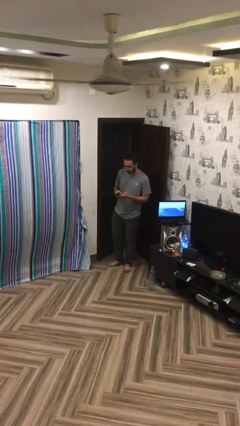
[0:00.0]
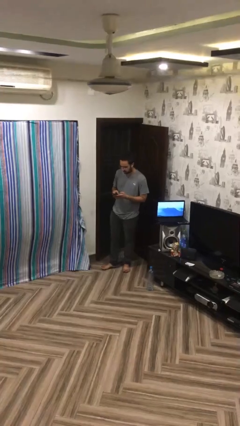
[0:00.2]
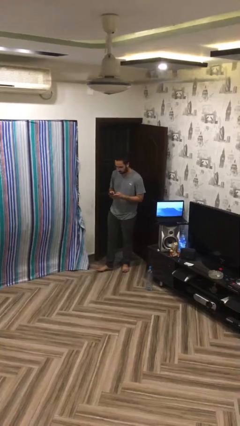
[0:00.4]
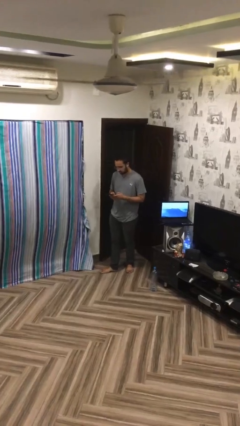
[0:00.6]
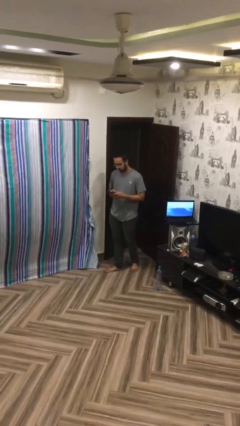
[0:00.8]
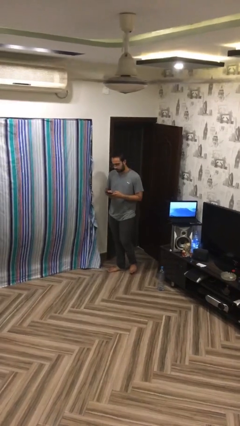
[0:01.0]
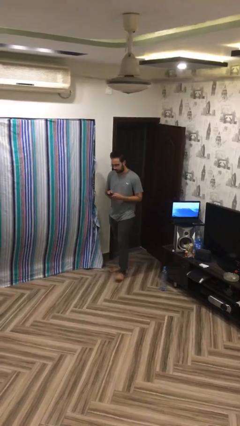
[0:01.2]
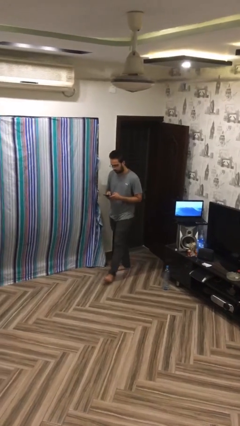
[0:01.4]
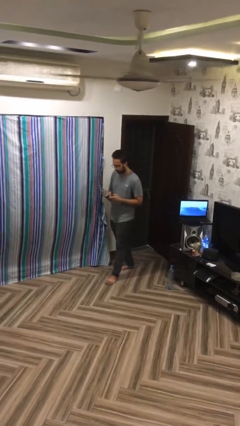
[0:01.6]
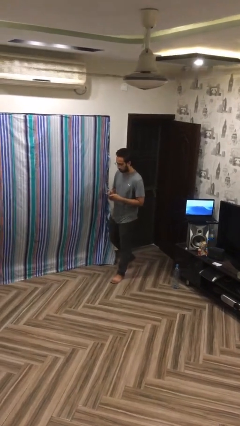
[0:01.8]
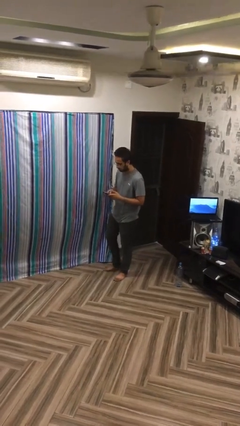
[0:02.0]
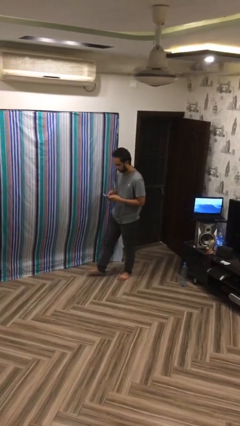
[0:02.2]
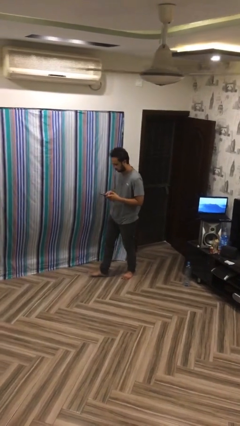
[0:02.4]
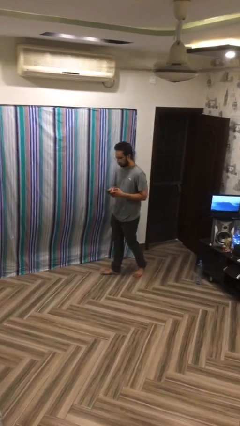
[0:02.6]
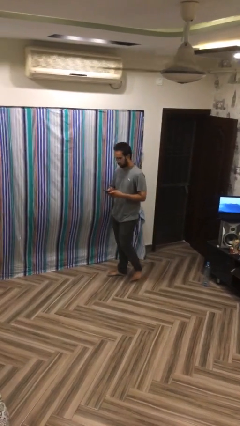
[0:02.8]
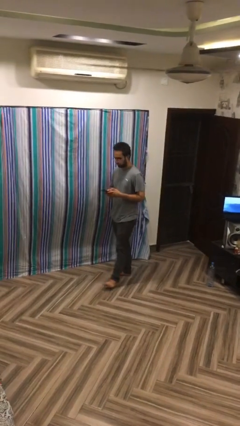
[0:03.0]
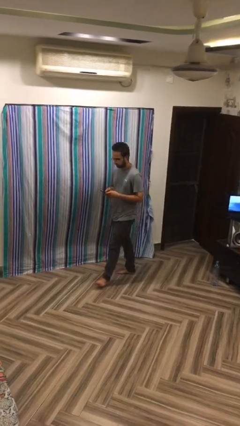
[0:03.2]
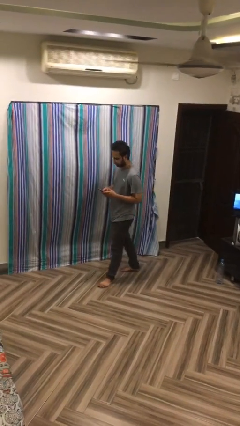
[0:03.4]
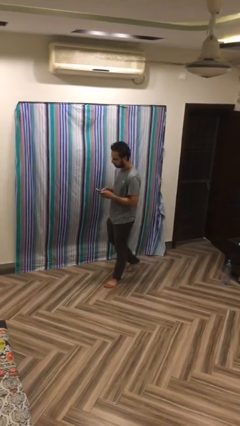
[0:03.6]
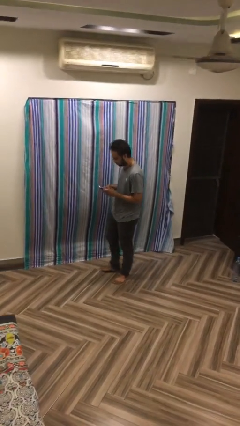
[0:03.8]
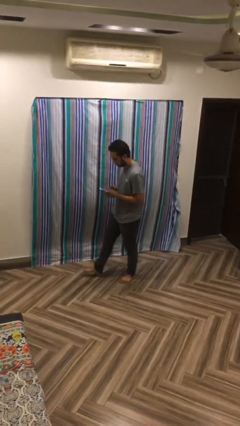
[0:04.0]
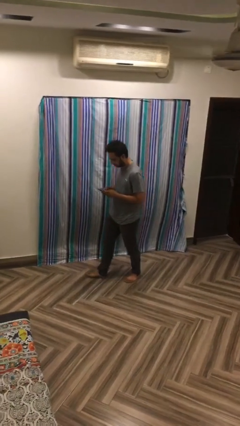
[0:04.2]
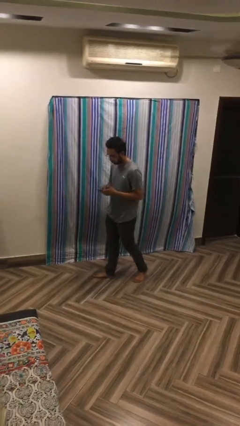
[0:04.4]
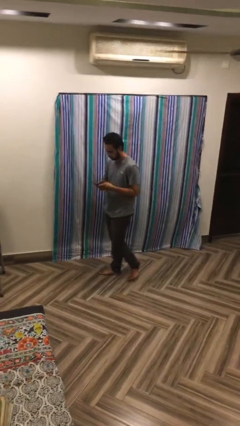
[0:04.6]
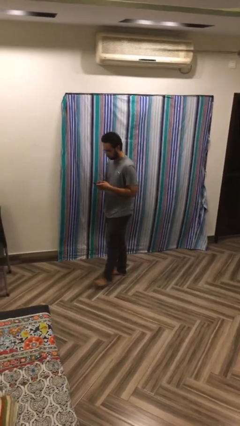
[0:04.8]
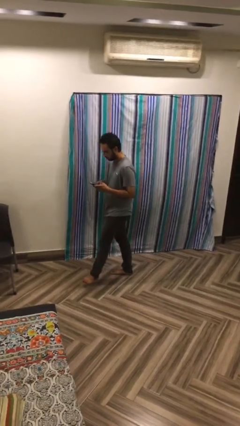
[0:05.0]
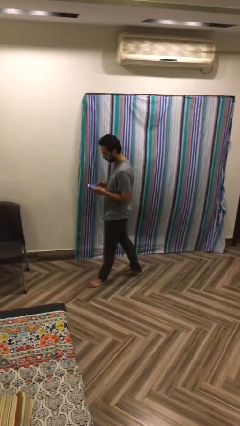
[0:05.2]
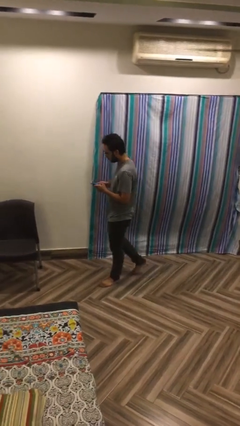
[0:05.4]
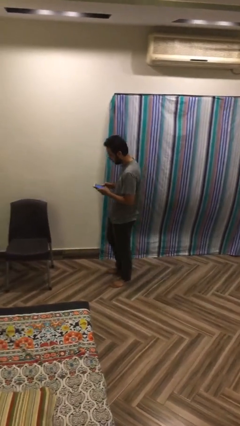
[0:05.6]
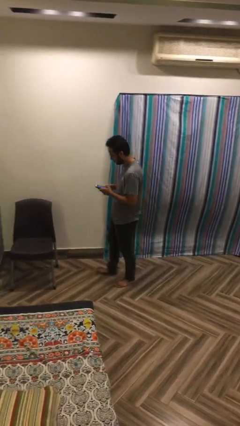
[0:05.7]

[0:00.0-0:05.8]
person texts on phone

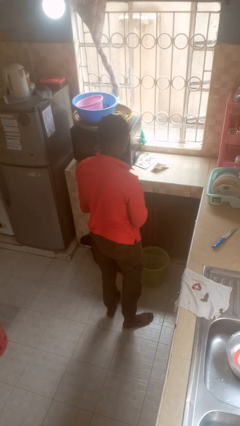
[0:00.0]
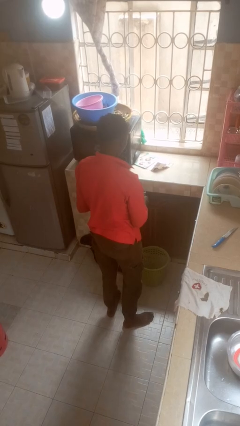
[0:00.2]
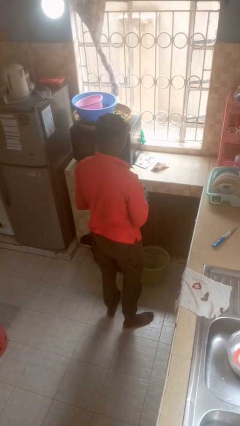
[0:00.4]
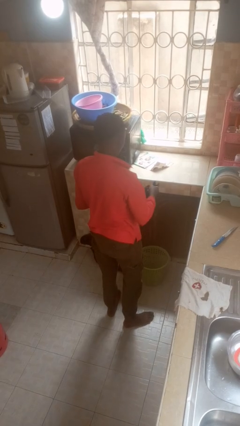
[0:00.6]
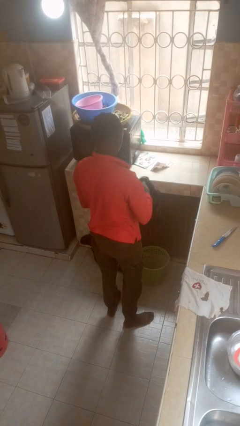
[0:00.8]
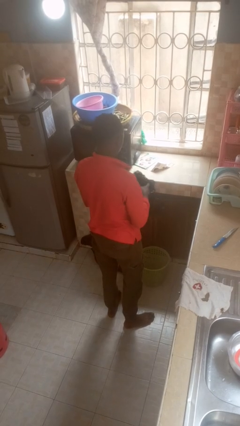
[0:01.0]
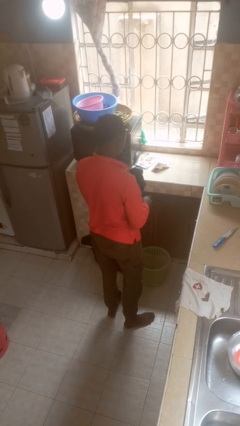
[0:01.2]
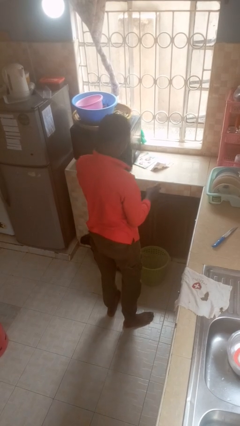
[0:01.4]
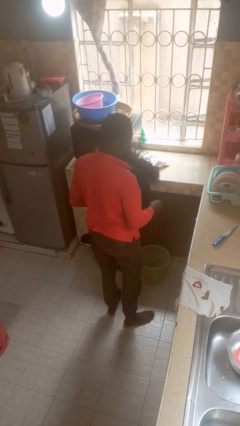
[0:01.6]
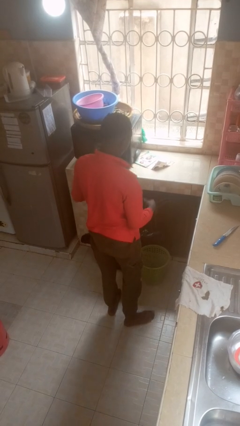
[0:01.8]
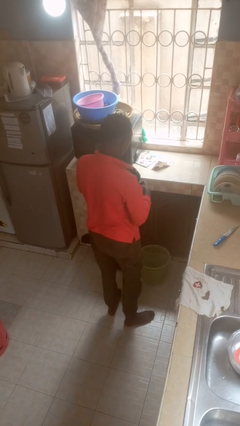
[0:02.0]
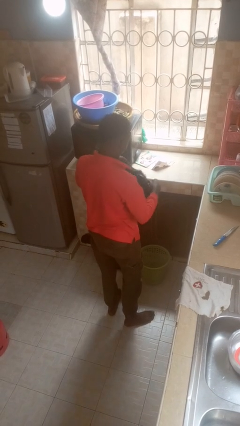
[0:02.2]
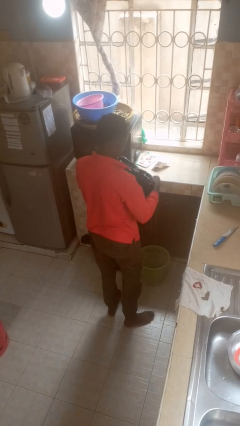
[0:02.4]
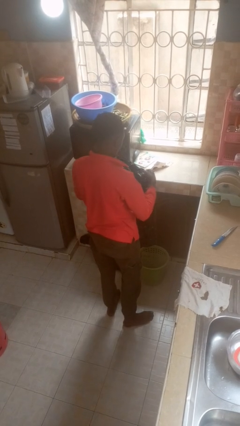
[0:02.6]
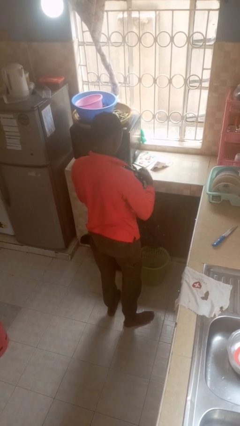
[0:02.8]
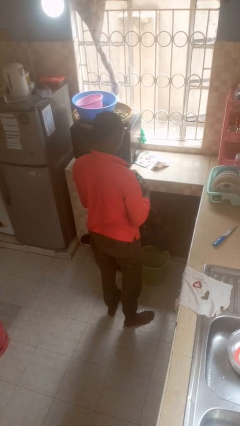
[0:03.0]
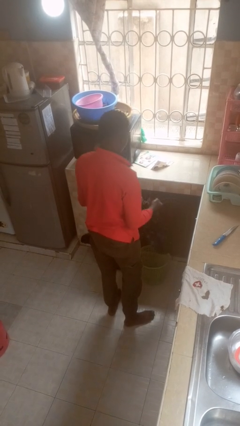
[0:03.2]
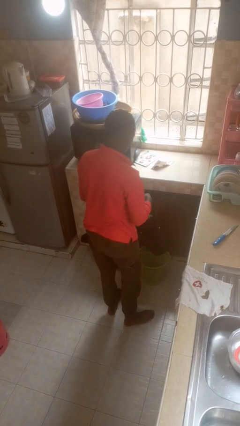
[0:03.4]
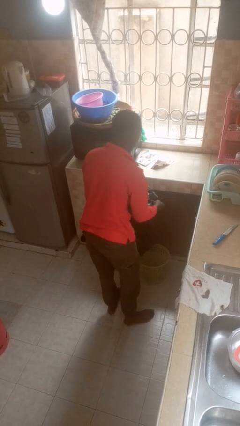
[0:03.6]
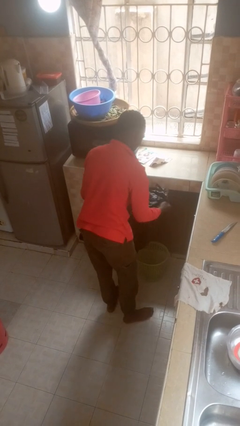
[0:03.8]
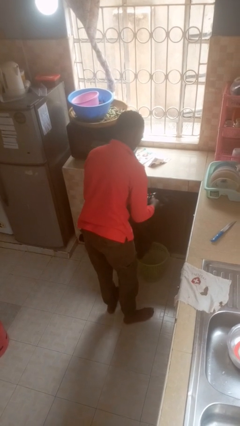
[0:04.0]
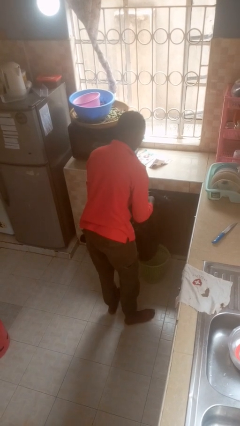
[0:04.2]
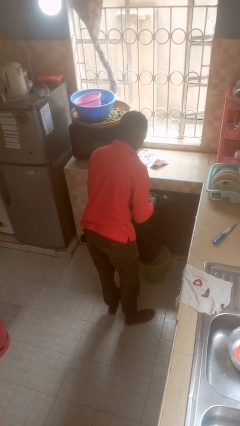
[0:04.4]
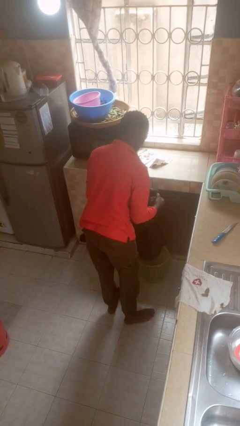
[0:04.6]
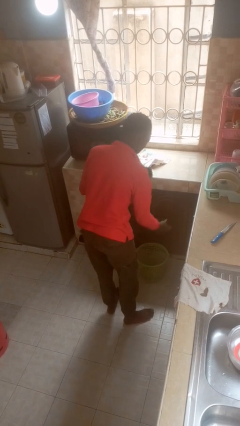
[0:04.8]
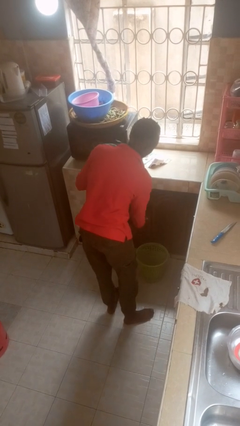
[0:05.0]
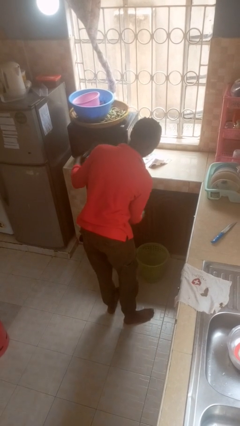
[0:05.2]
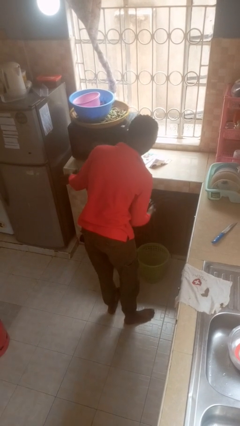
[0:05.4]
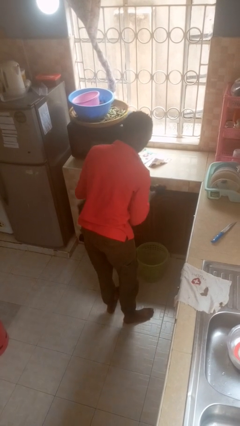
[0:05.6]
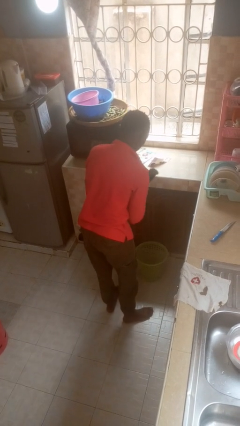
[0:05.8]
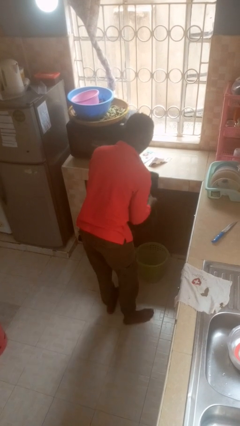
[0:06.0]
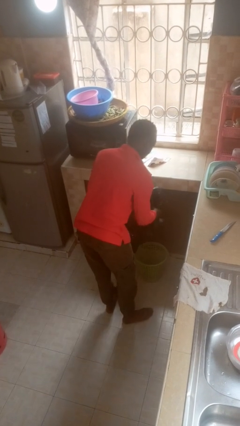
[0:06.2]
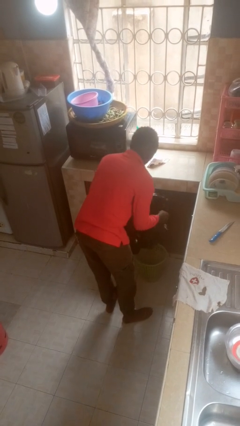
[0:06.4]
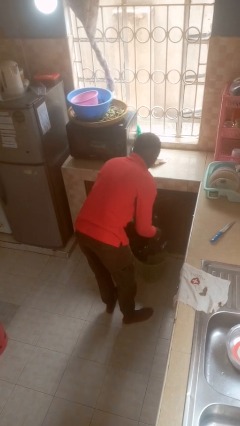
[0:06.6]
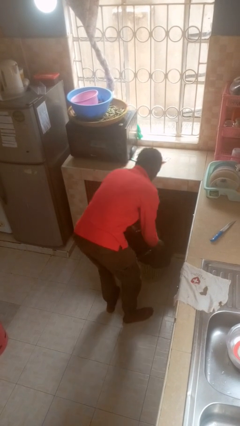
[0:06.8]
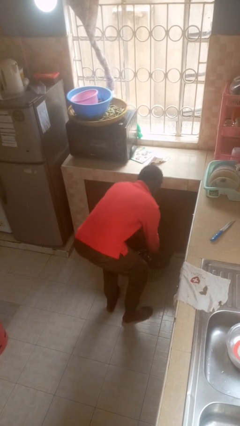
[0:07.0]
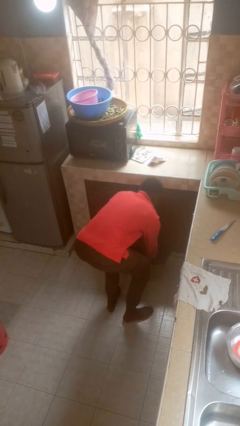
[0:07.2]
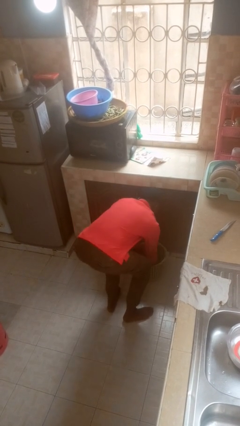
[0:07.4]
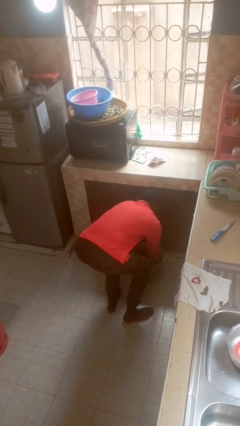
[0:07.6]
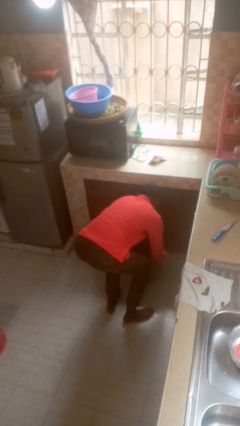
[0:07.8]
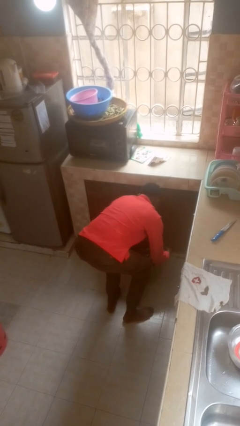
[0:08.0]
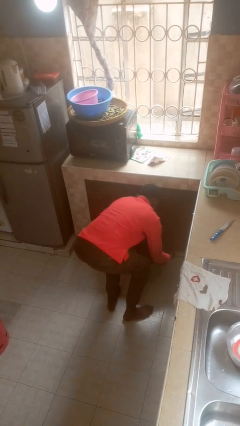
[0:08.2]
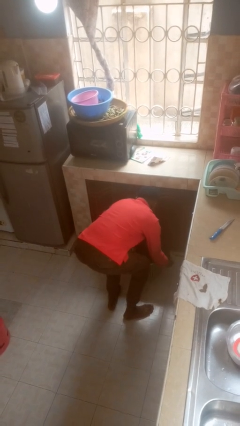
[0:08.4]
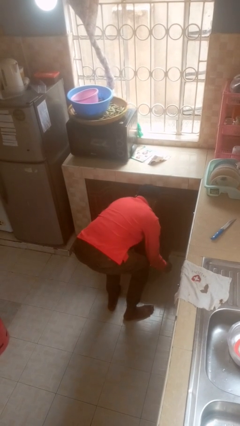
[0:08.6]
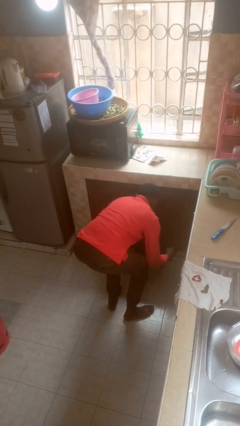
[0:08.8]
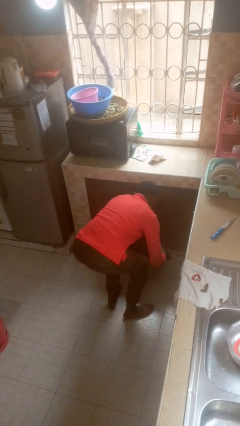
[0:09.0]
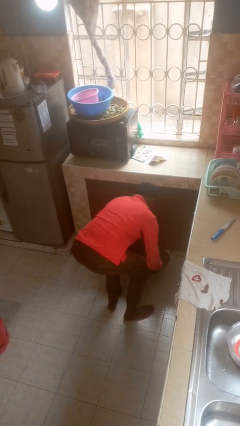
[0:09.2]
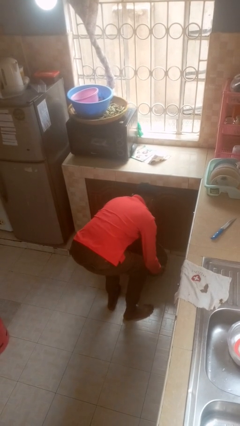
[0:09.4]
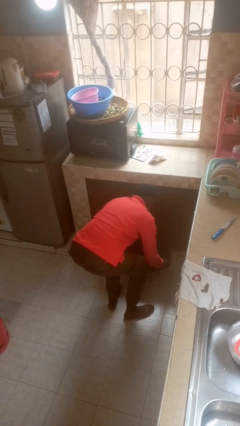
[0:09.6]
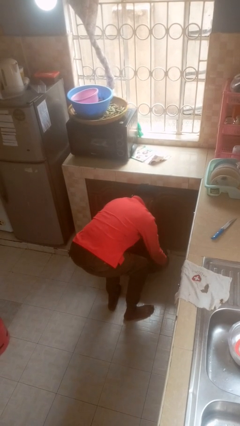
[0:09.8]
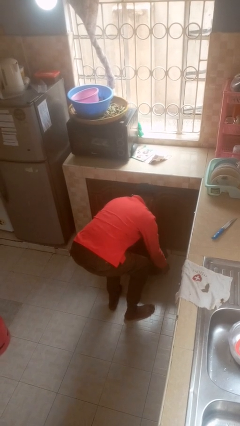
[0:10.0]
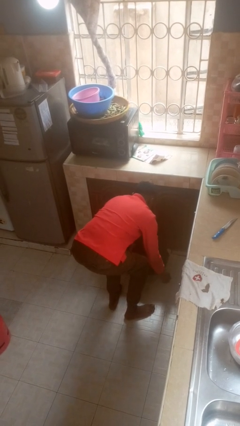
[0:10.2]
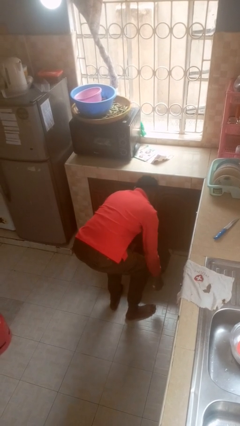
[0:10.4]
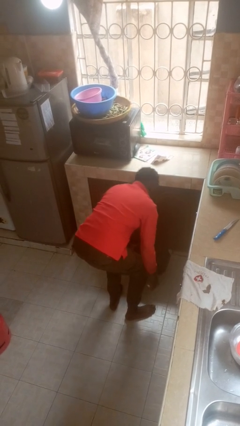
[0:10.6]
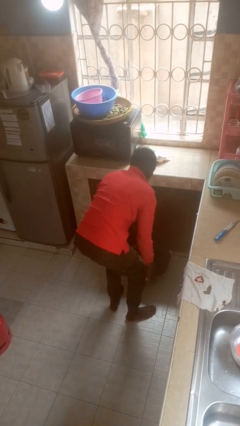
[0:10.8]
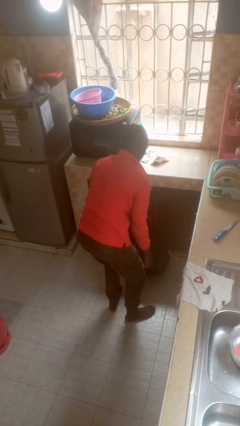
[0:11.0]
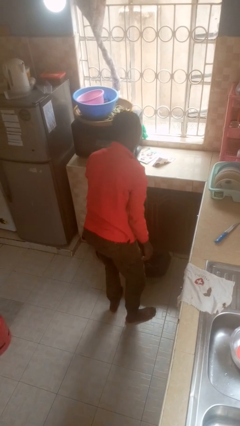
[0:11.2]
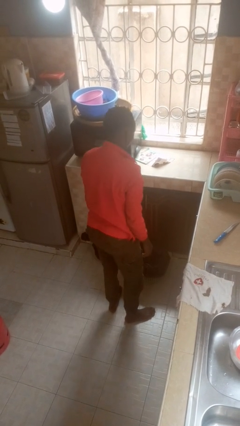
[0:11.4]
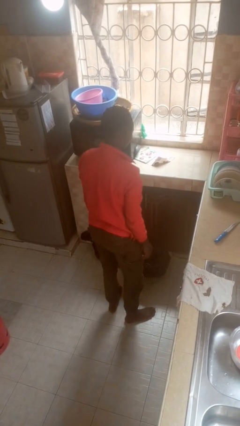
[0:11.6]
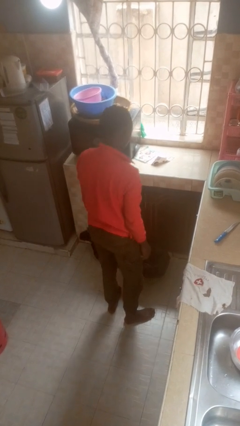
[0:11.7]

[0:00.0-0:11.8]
person inserts trashbag into trashcan

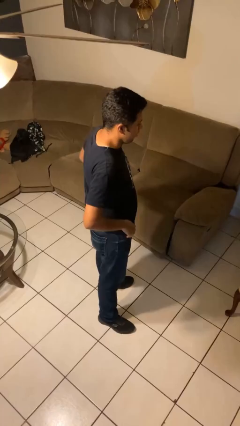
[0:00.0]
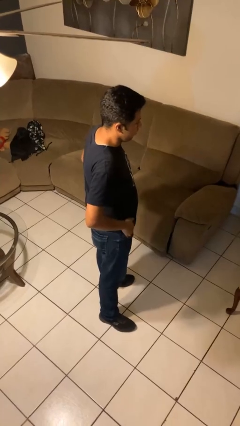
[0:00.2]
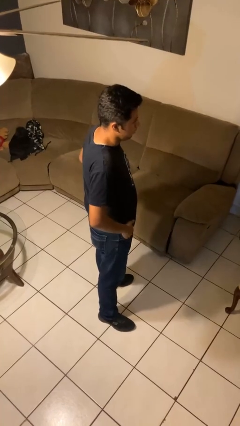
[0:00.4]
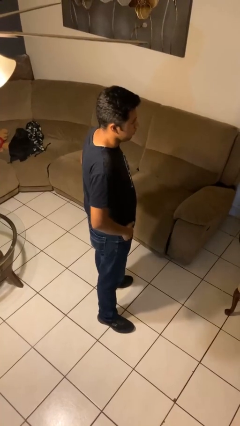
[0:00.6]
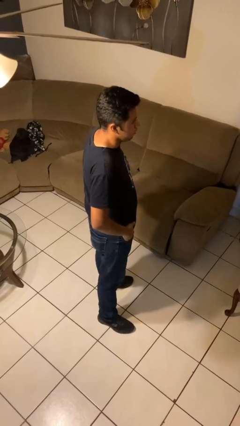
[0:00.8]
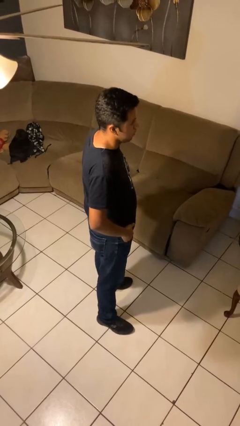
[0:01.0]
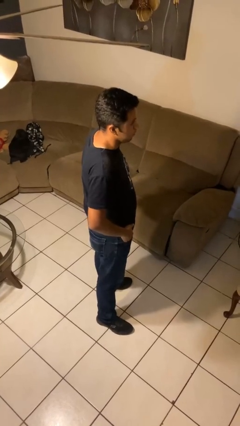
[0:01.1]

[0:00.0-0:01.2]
person puts hands in back pockets
